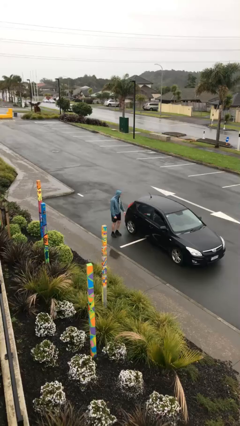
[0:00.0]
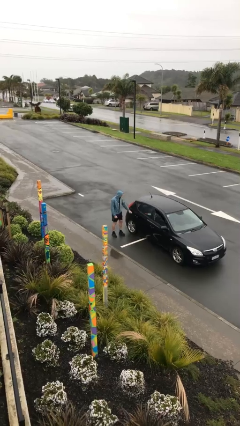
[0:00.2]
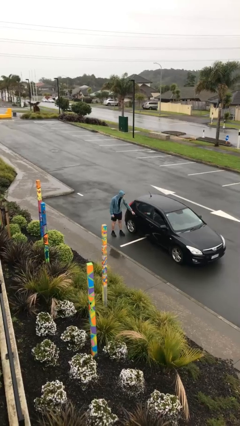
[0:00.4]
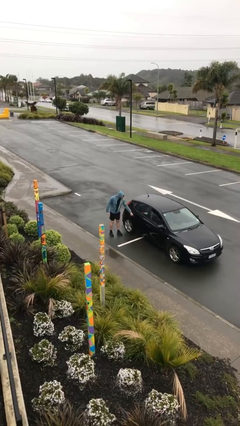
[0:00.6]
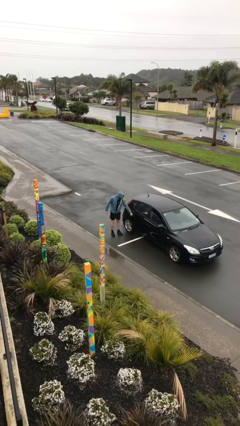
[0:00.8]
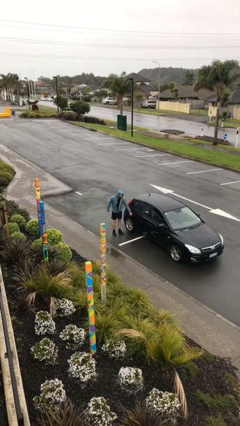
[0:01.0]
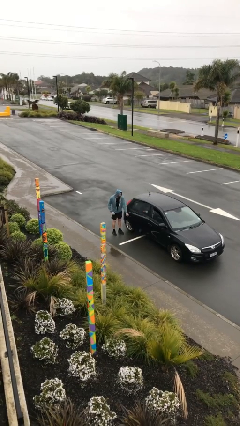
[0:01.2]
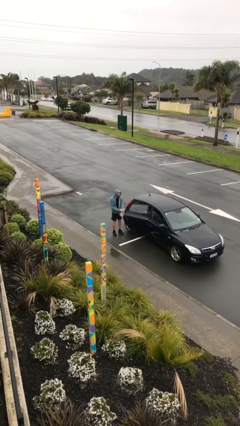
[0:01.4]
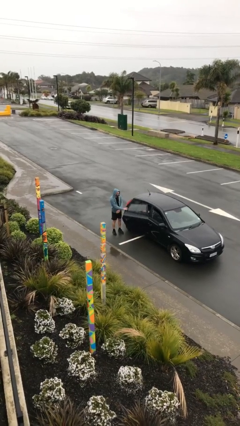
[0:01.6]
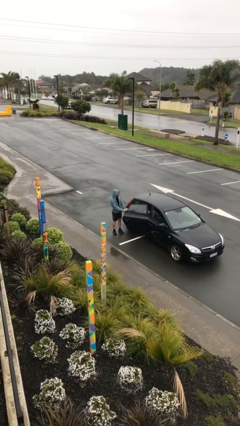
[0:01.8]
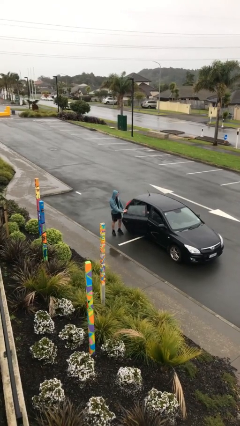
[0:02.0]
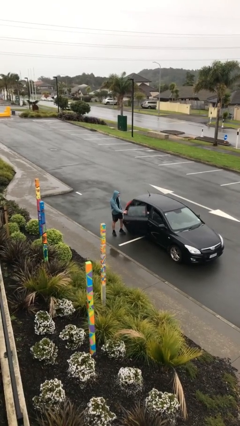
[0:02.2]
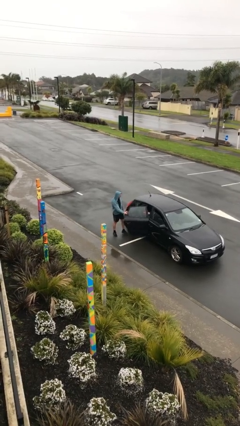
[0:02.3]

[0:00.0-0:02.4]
person opens car door

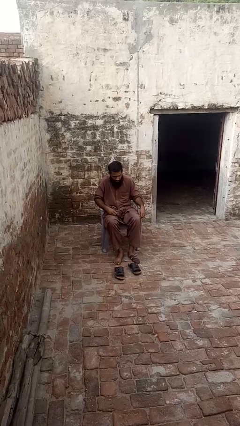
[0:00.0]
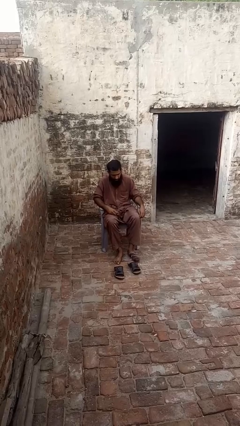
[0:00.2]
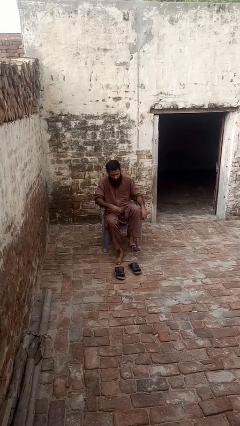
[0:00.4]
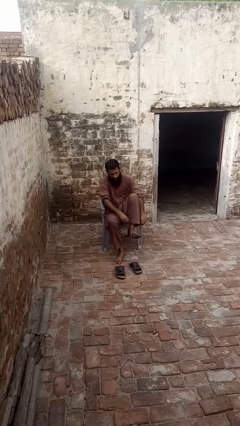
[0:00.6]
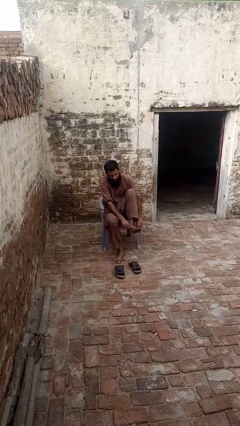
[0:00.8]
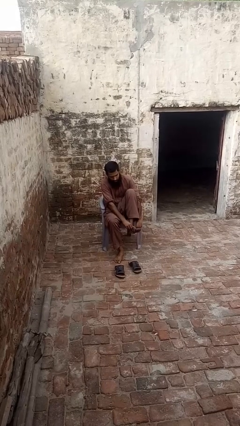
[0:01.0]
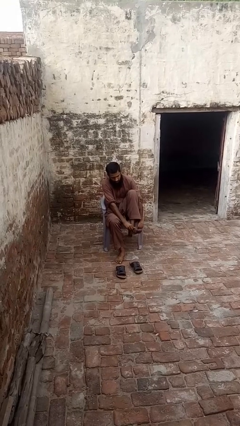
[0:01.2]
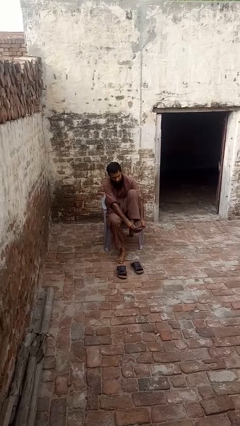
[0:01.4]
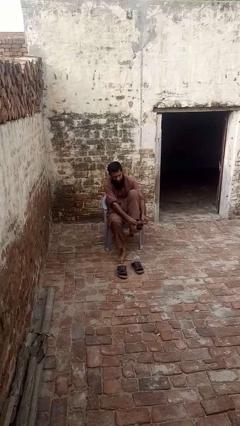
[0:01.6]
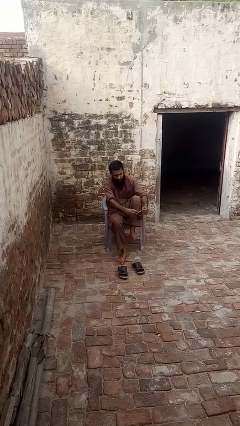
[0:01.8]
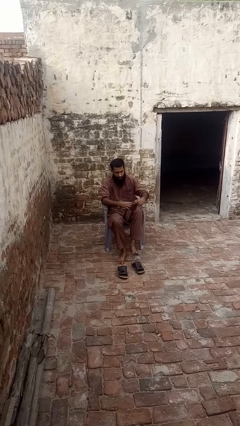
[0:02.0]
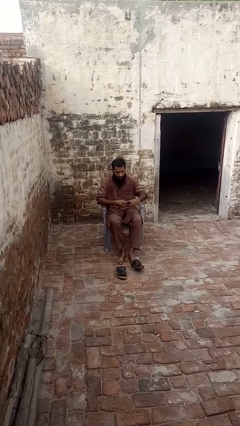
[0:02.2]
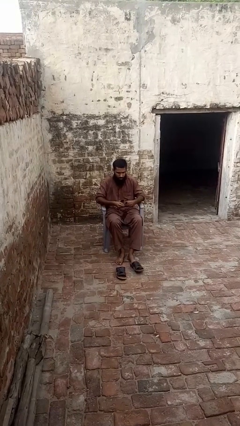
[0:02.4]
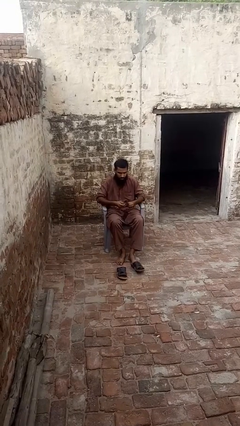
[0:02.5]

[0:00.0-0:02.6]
person takes off socks

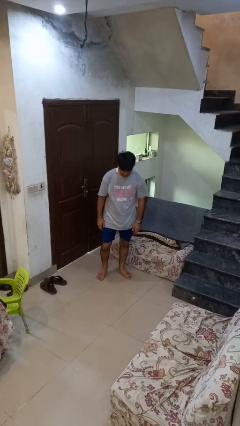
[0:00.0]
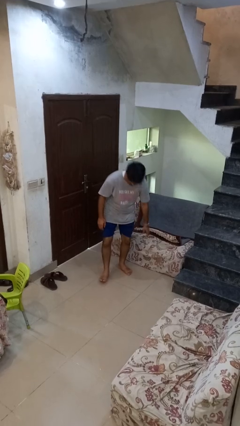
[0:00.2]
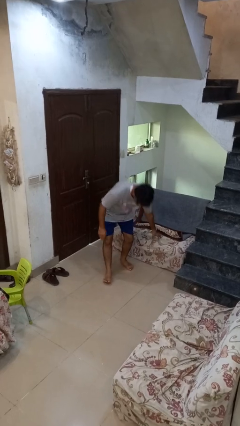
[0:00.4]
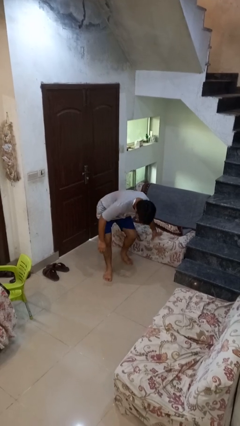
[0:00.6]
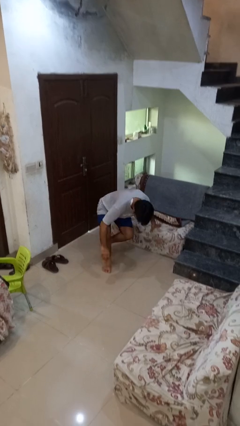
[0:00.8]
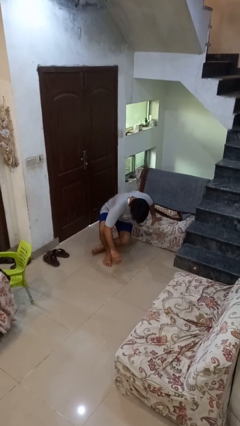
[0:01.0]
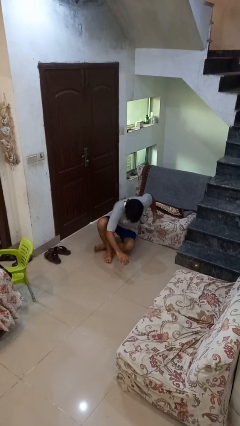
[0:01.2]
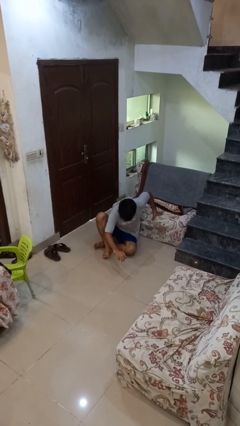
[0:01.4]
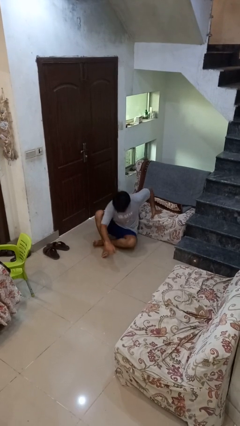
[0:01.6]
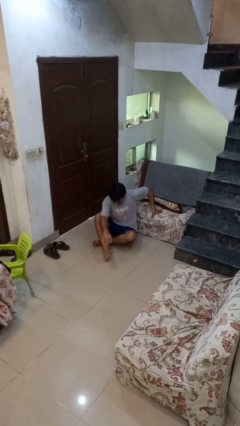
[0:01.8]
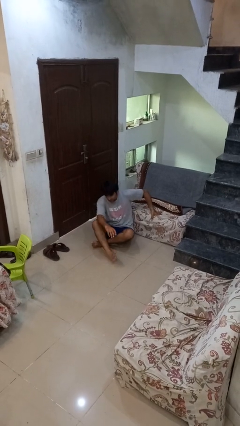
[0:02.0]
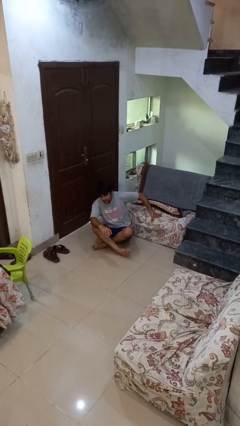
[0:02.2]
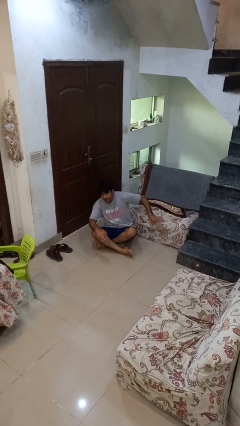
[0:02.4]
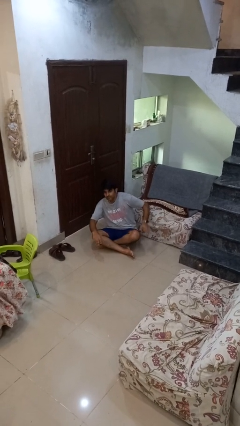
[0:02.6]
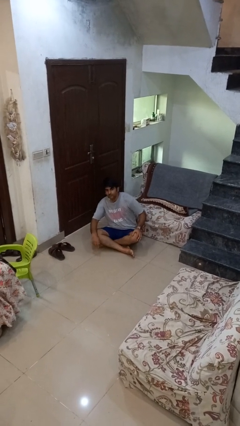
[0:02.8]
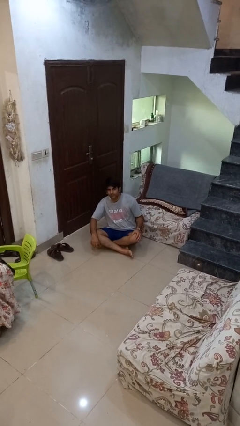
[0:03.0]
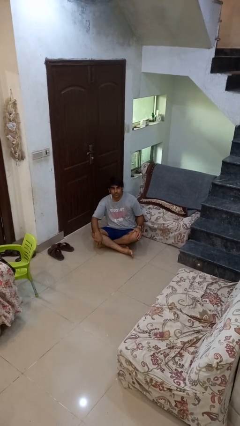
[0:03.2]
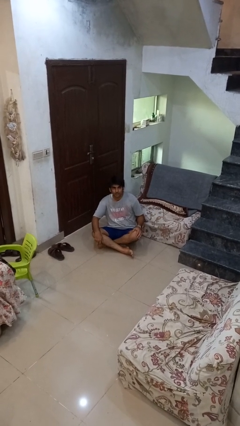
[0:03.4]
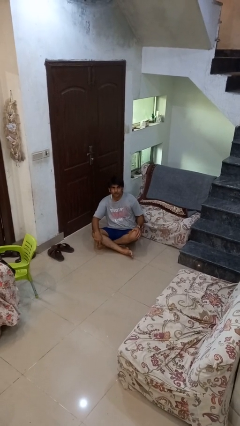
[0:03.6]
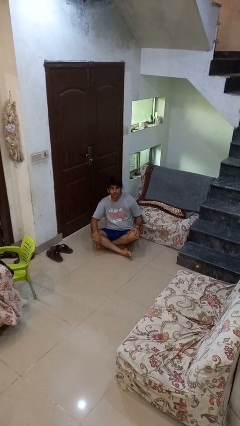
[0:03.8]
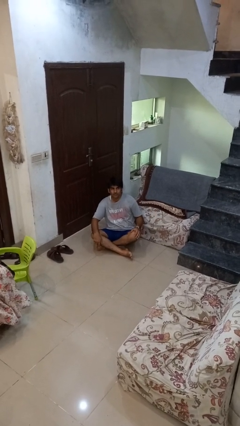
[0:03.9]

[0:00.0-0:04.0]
person sits crisscross

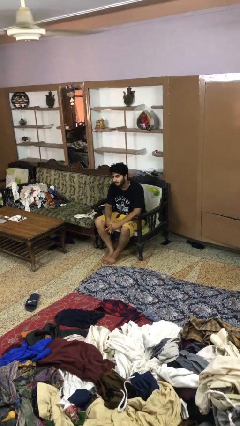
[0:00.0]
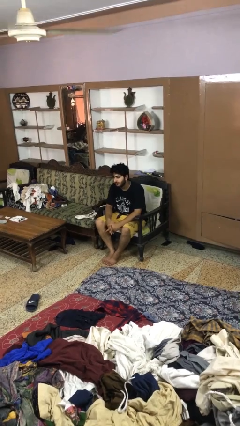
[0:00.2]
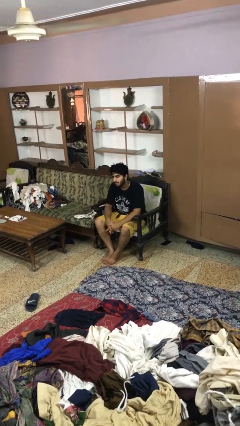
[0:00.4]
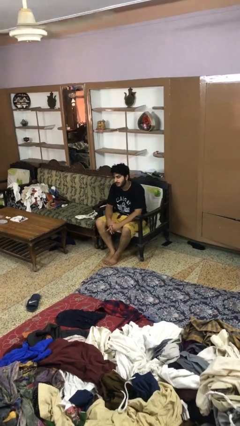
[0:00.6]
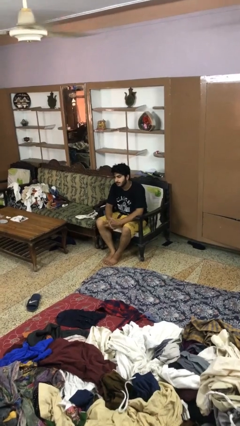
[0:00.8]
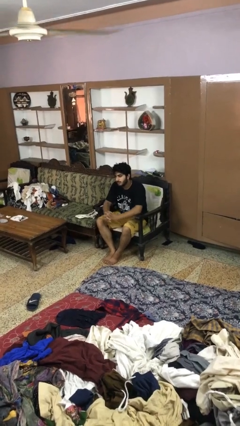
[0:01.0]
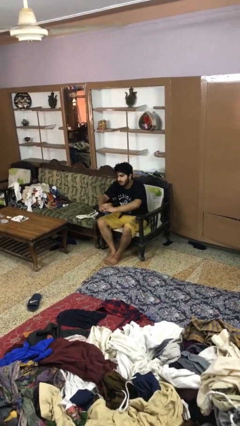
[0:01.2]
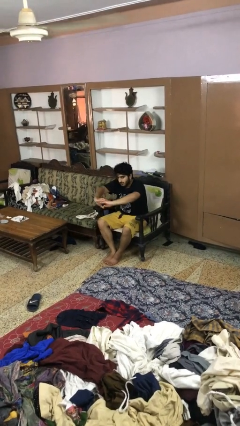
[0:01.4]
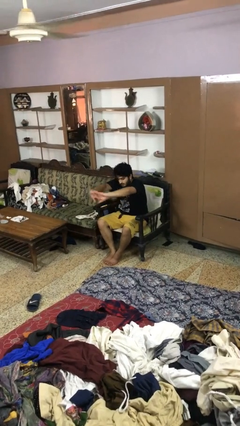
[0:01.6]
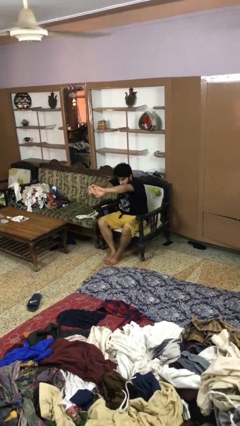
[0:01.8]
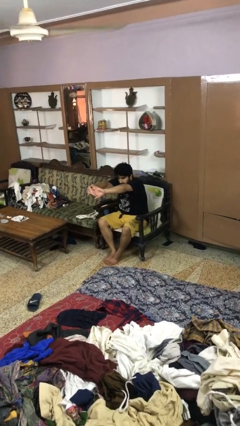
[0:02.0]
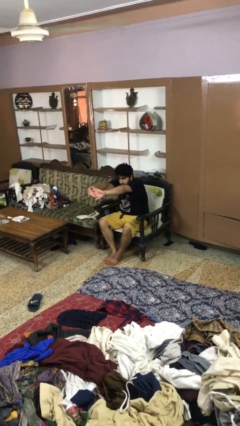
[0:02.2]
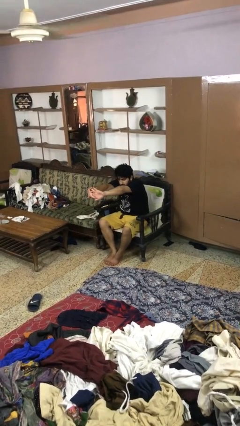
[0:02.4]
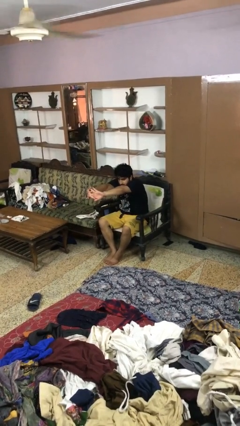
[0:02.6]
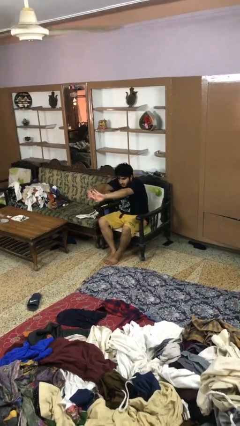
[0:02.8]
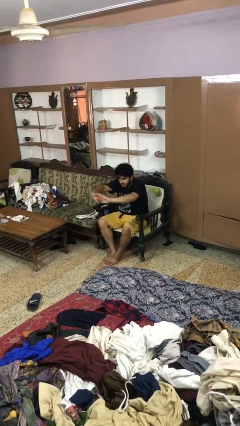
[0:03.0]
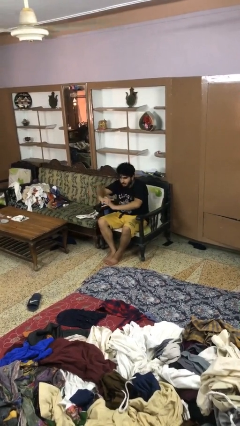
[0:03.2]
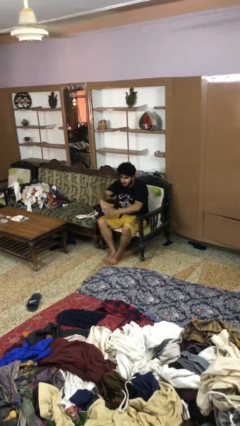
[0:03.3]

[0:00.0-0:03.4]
person cracks knuckles

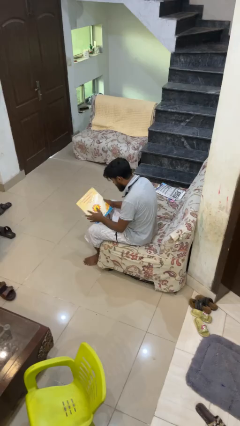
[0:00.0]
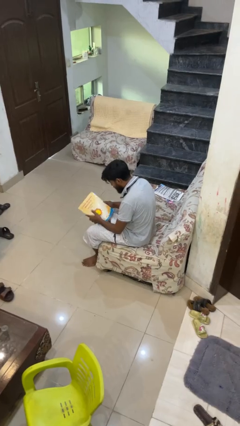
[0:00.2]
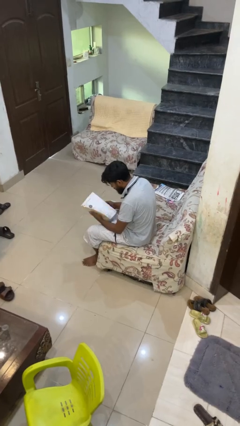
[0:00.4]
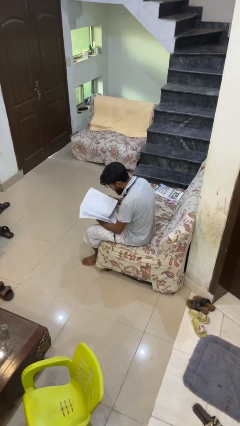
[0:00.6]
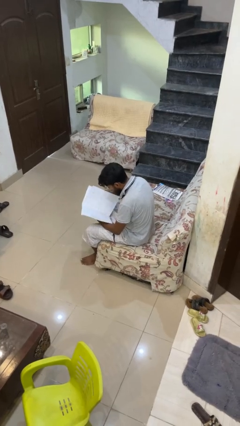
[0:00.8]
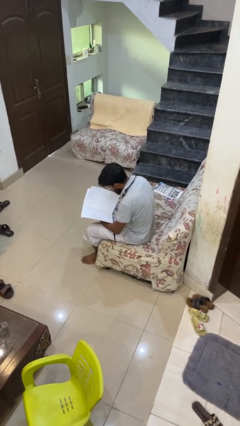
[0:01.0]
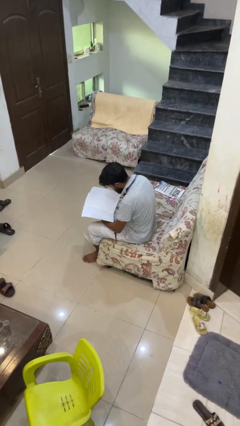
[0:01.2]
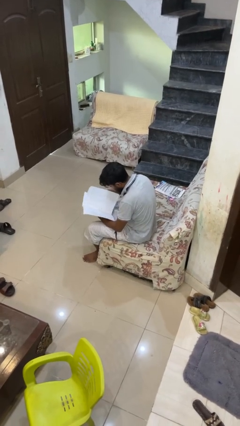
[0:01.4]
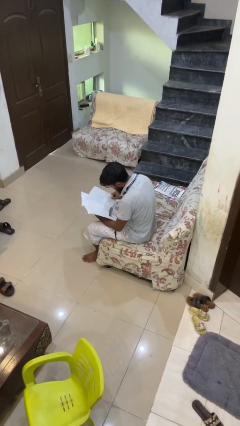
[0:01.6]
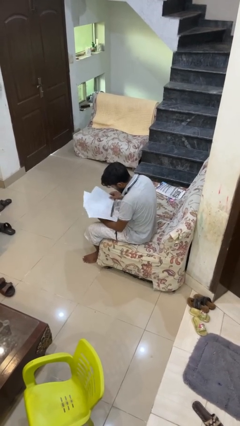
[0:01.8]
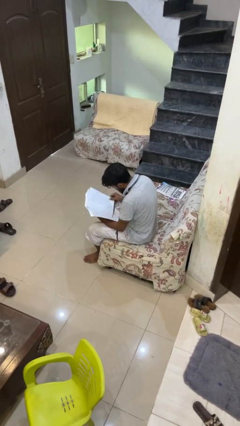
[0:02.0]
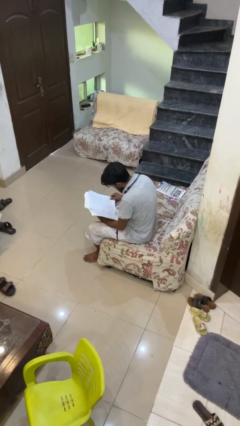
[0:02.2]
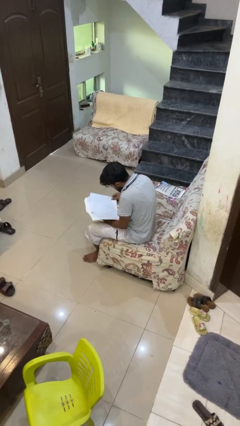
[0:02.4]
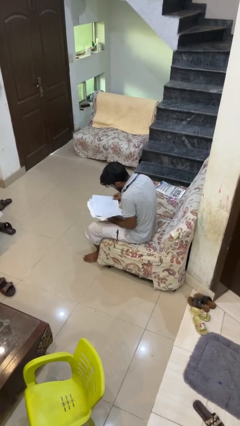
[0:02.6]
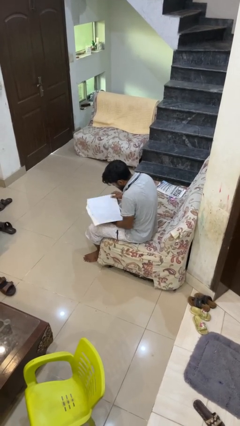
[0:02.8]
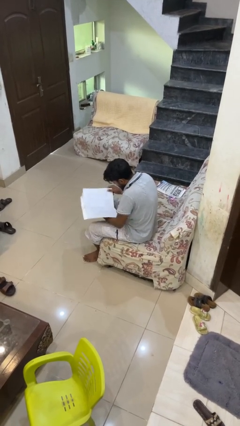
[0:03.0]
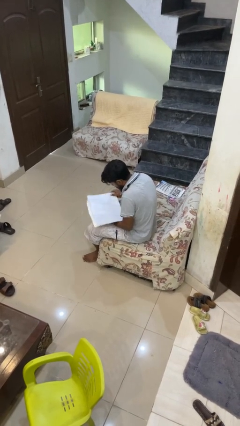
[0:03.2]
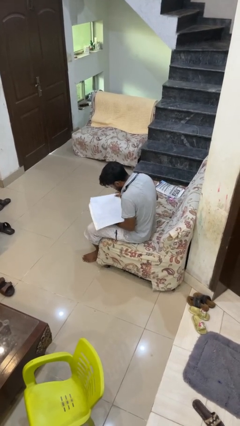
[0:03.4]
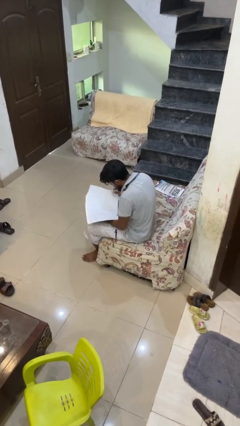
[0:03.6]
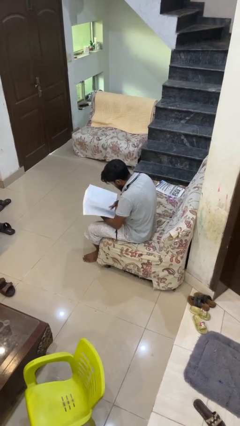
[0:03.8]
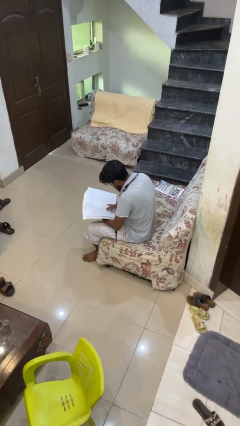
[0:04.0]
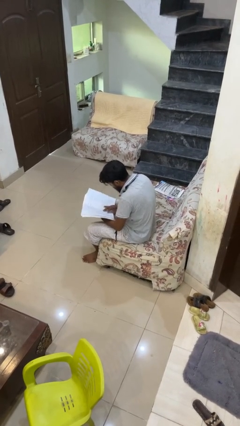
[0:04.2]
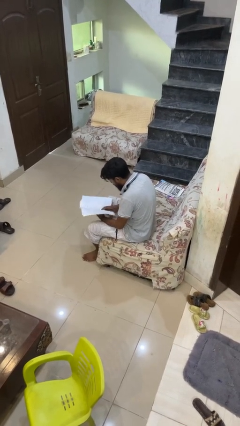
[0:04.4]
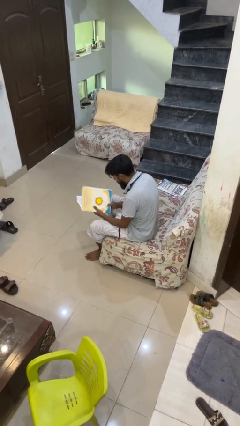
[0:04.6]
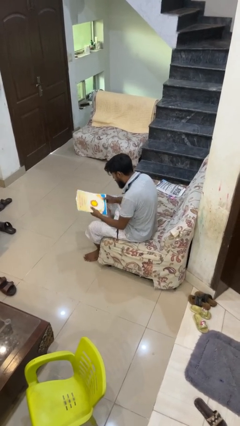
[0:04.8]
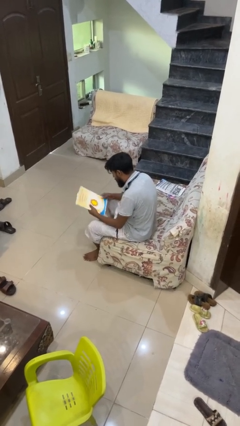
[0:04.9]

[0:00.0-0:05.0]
person reads book

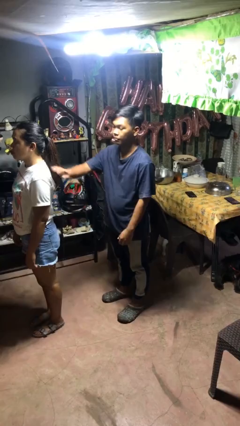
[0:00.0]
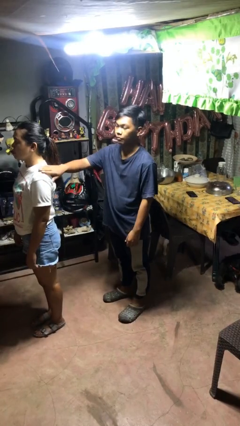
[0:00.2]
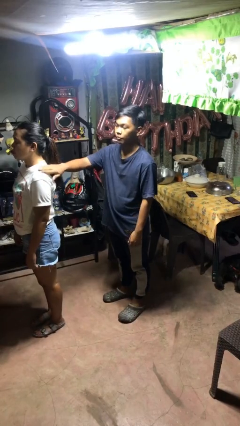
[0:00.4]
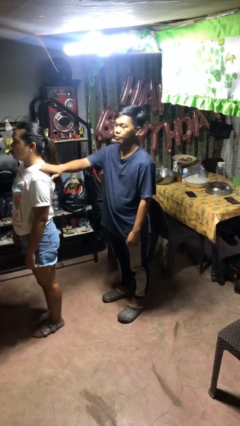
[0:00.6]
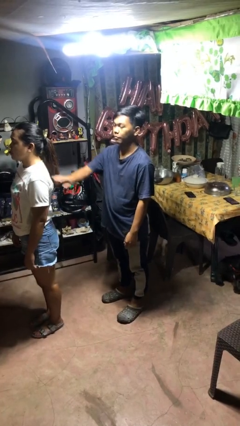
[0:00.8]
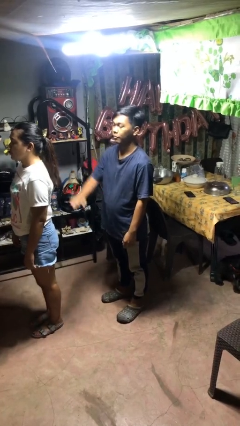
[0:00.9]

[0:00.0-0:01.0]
person pounds shoulders of person
